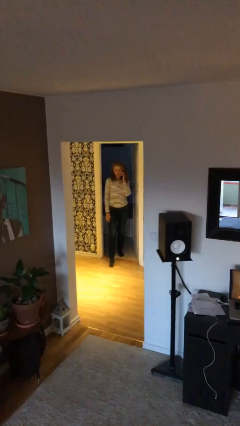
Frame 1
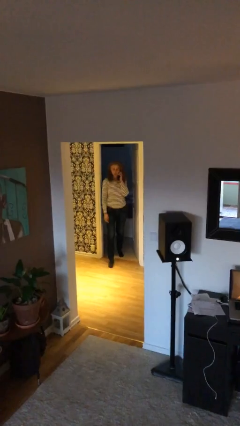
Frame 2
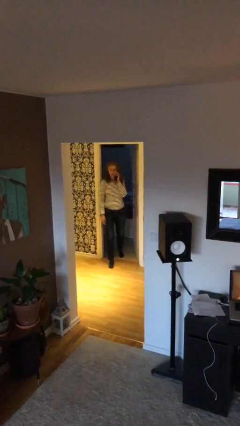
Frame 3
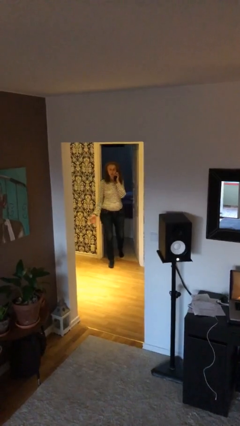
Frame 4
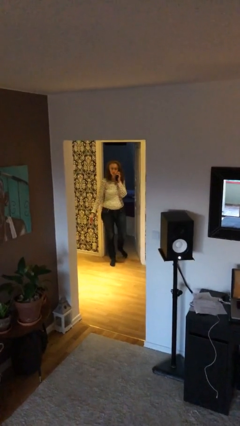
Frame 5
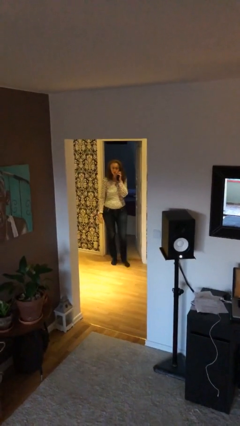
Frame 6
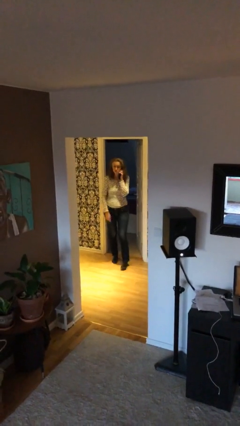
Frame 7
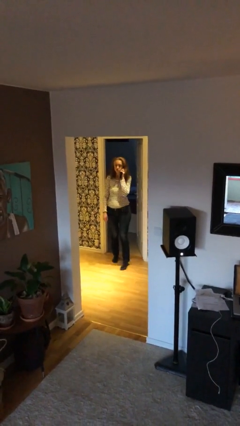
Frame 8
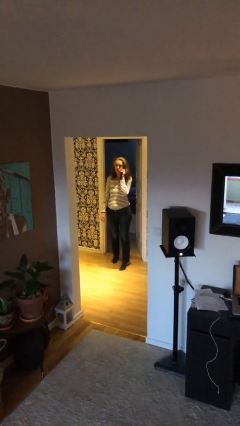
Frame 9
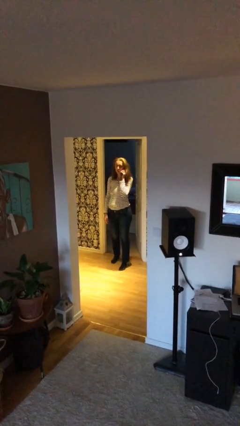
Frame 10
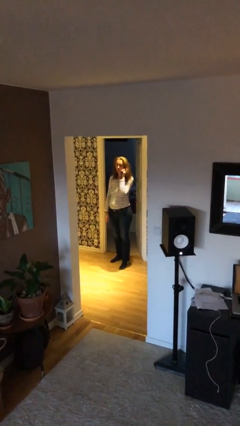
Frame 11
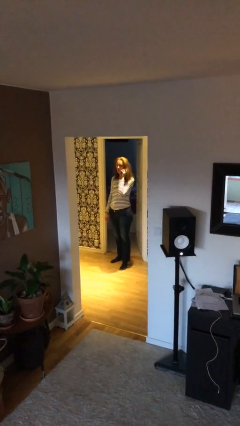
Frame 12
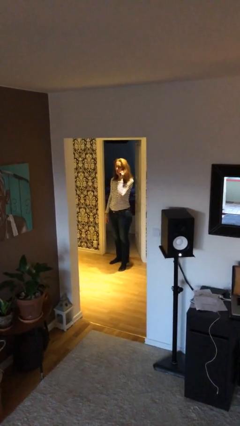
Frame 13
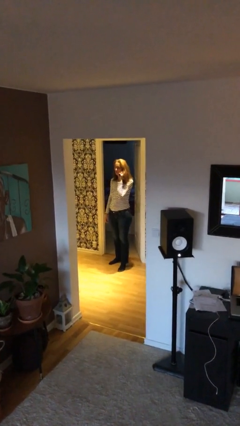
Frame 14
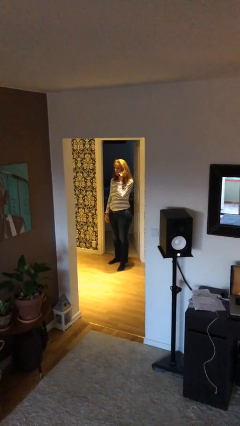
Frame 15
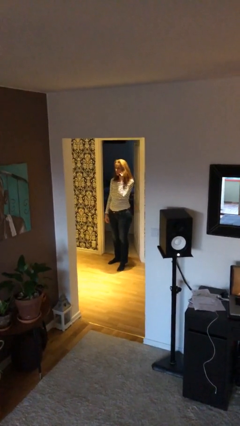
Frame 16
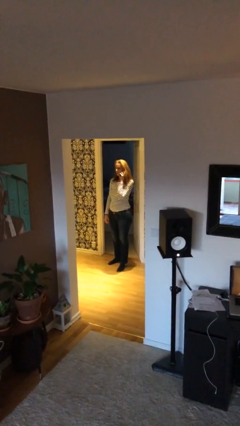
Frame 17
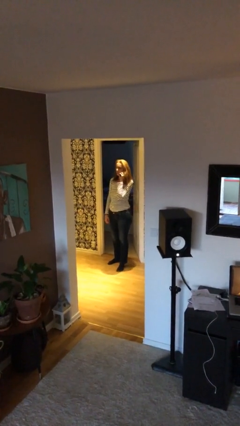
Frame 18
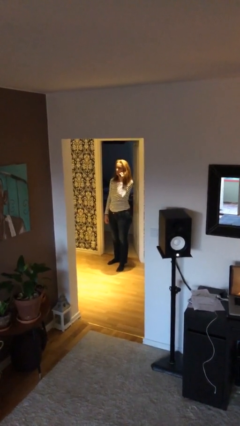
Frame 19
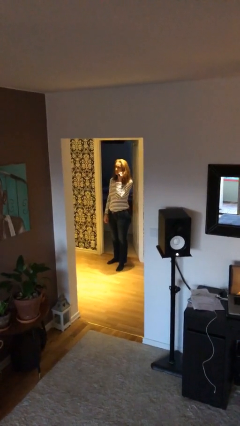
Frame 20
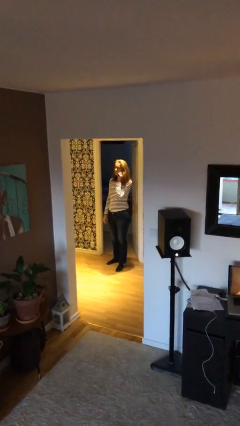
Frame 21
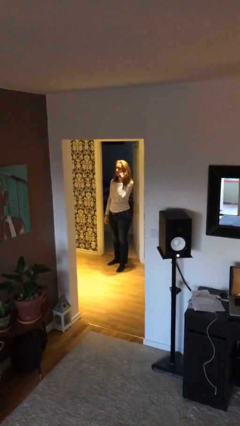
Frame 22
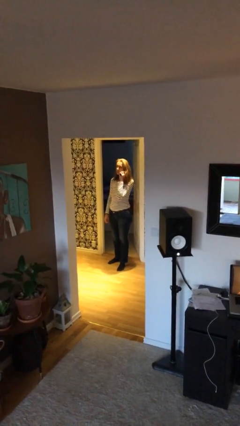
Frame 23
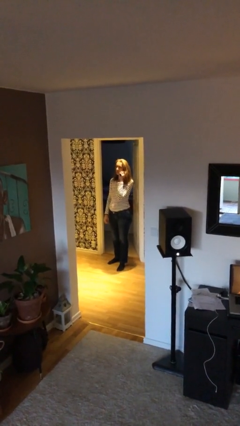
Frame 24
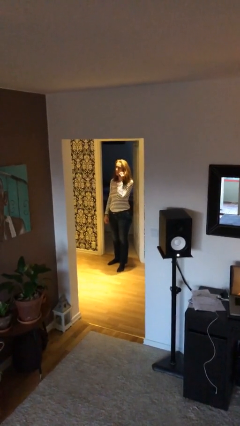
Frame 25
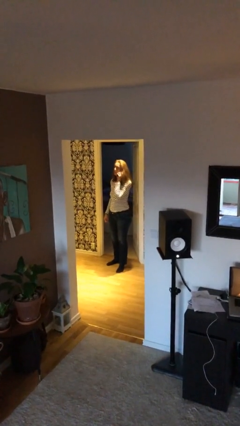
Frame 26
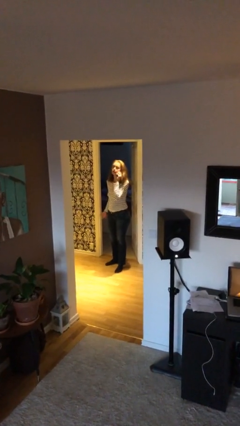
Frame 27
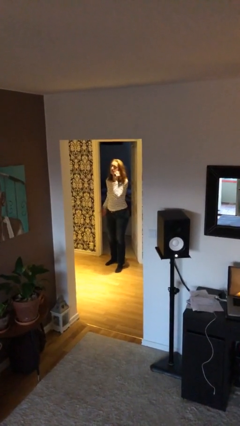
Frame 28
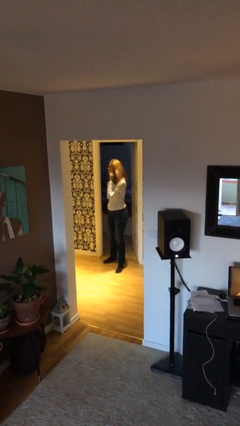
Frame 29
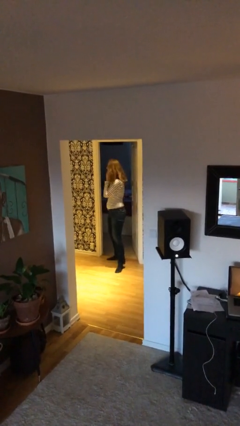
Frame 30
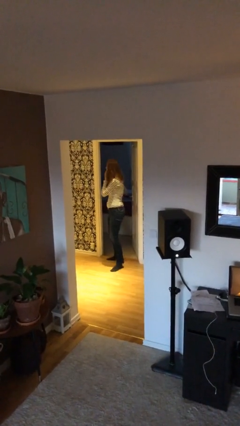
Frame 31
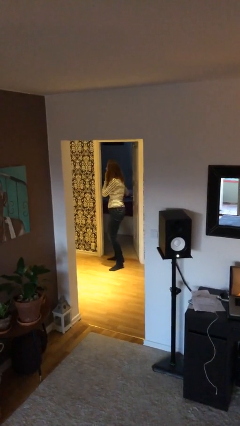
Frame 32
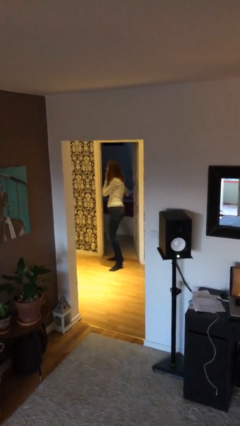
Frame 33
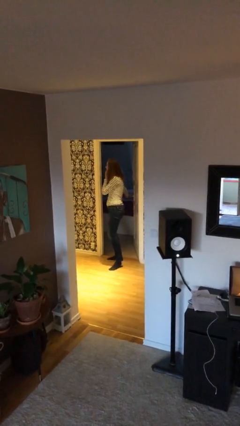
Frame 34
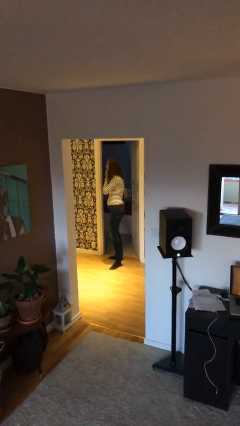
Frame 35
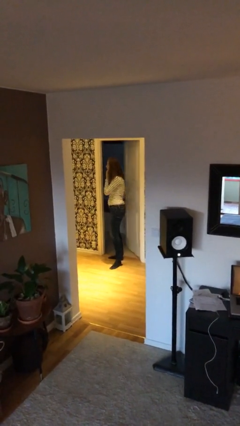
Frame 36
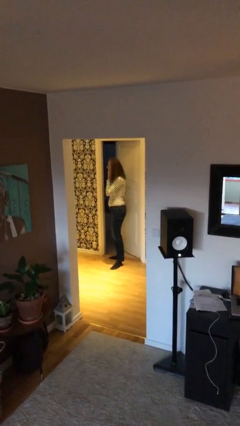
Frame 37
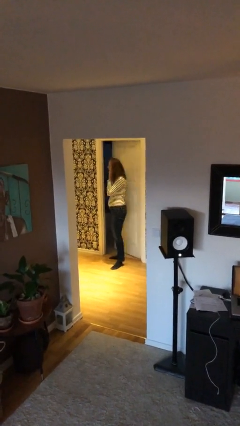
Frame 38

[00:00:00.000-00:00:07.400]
person enters scene through structure

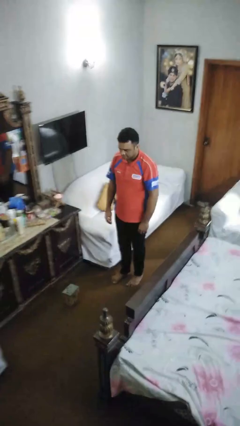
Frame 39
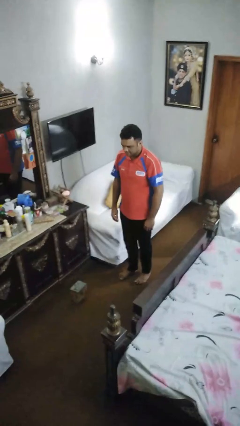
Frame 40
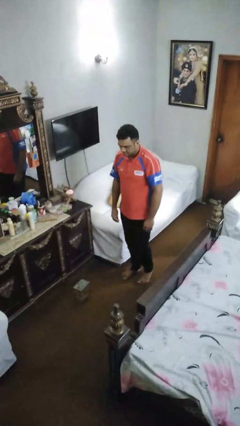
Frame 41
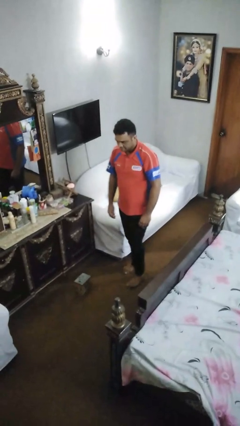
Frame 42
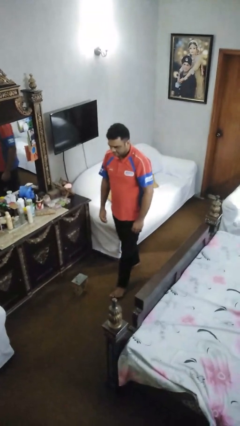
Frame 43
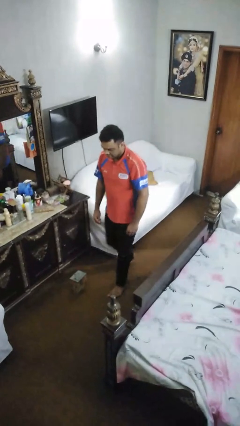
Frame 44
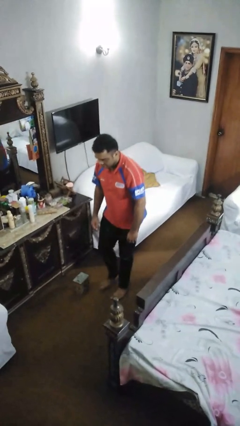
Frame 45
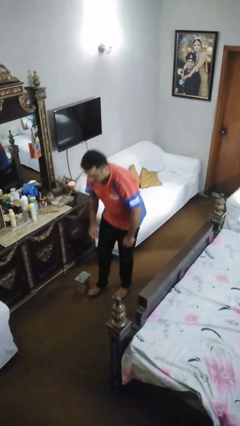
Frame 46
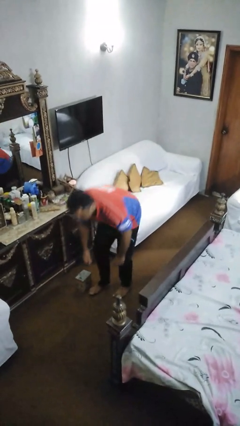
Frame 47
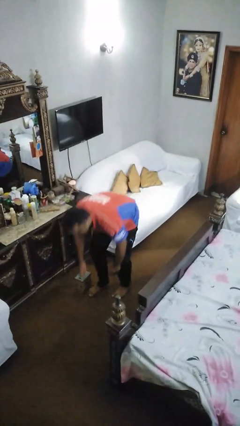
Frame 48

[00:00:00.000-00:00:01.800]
person trips on object on floor

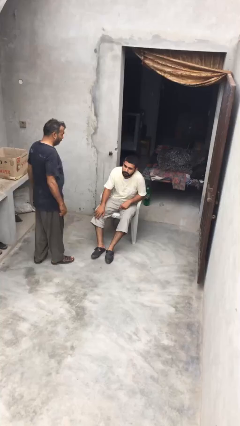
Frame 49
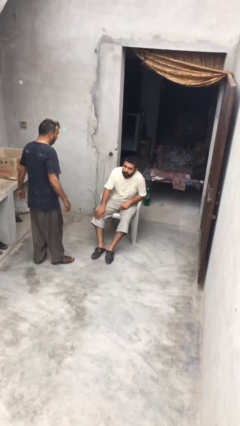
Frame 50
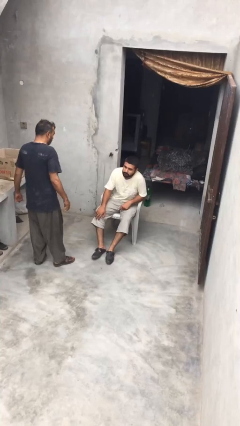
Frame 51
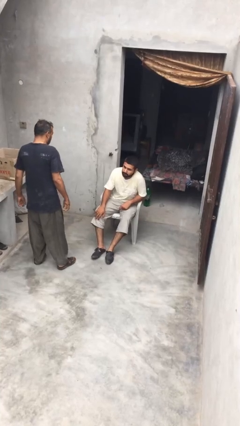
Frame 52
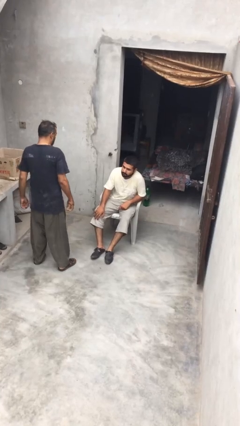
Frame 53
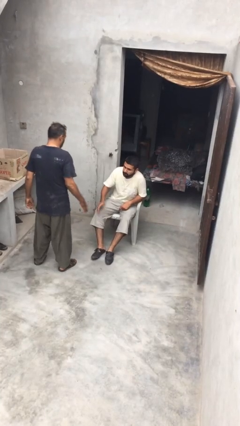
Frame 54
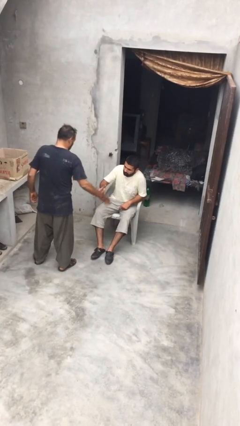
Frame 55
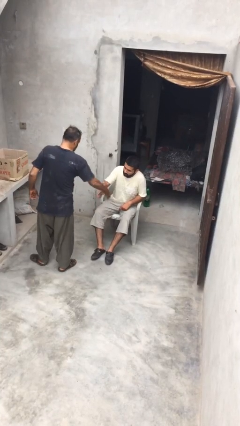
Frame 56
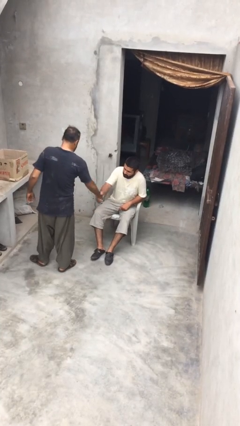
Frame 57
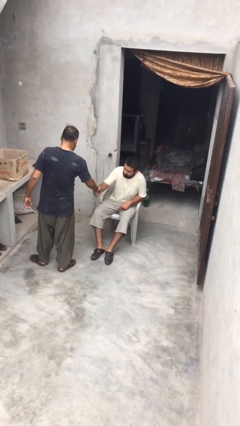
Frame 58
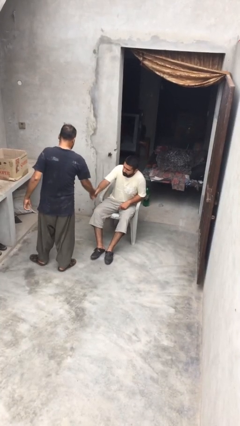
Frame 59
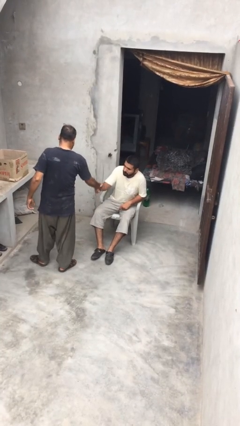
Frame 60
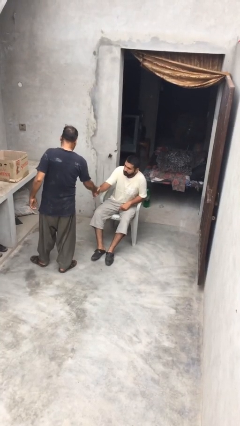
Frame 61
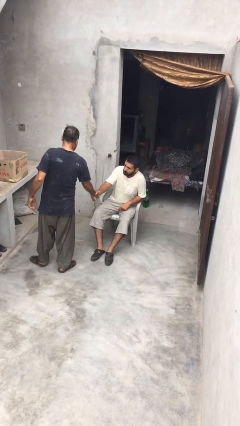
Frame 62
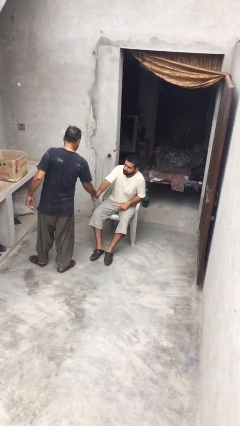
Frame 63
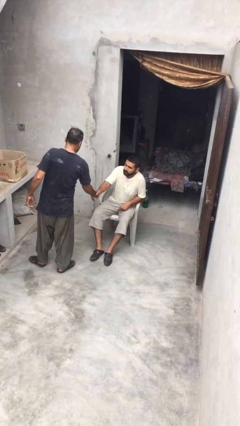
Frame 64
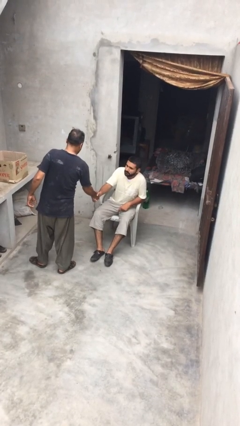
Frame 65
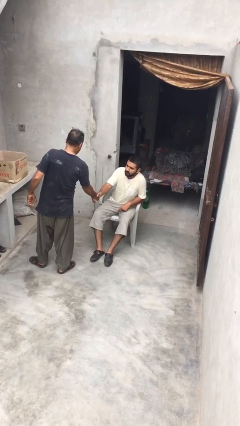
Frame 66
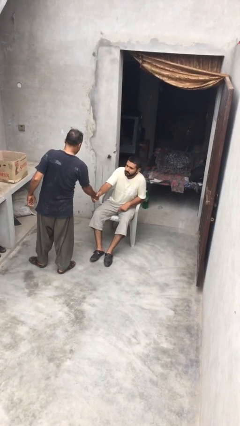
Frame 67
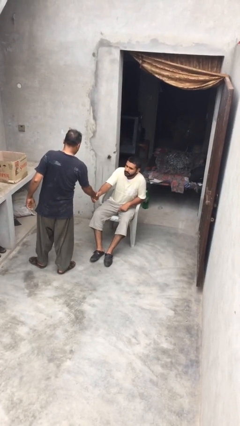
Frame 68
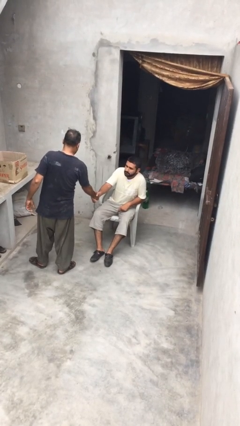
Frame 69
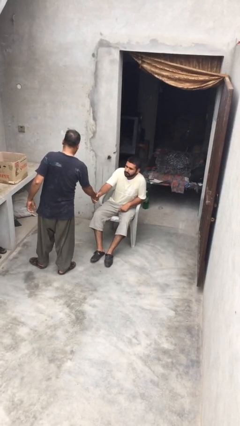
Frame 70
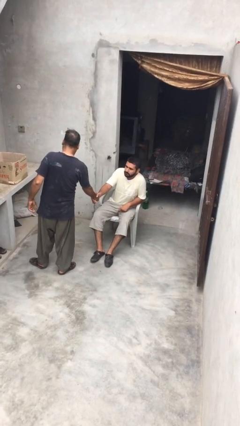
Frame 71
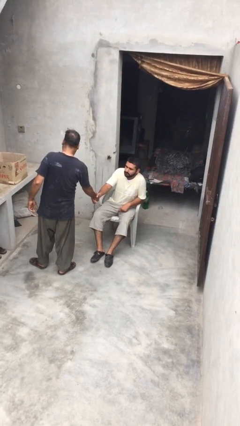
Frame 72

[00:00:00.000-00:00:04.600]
person shakes hand

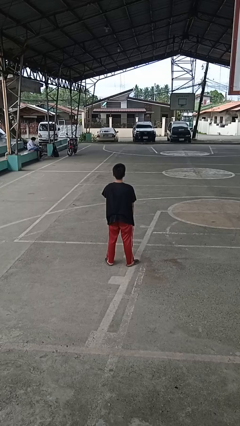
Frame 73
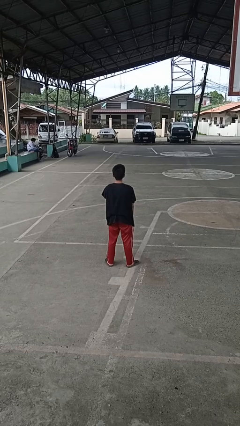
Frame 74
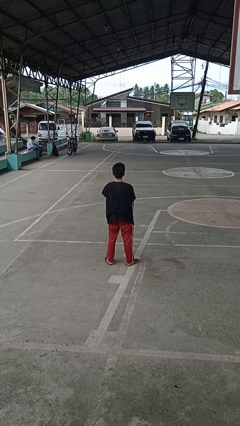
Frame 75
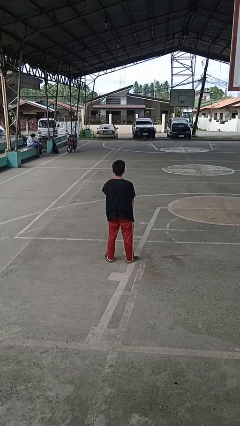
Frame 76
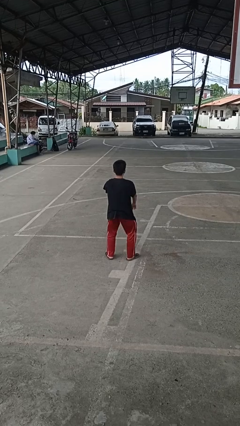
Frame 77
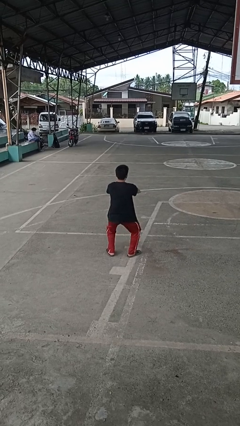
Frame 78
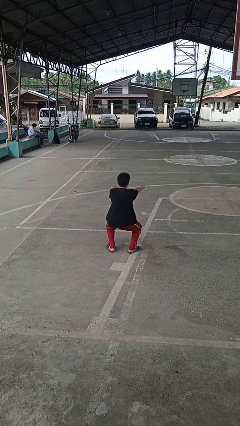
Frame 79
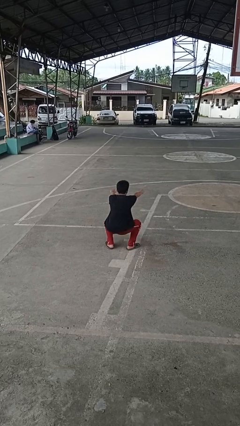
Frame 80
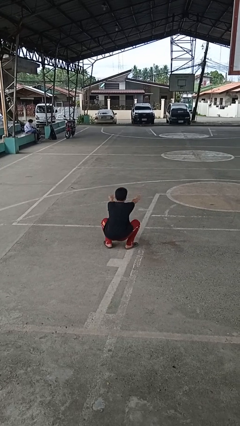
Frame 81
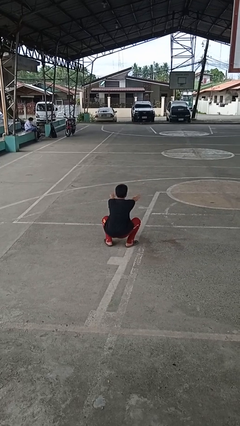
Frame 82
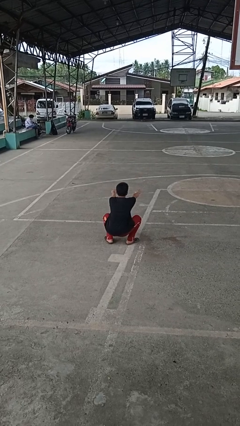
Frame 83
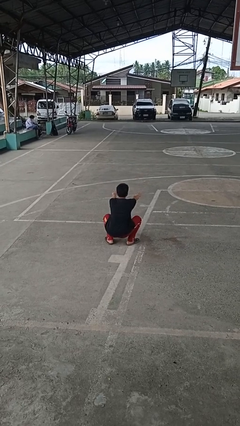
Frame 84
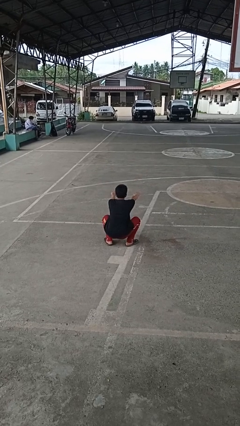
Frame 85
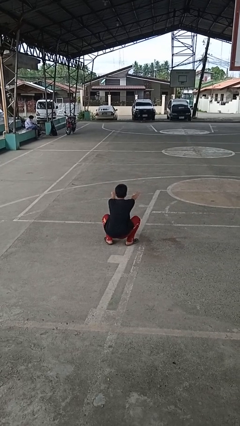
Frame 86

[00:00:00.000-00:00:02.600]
person squats

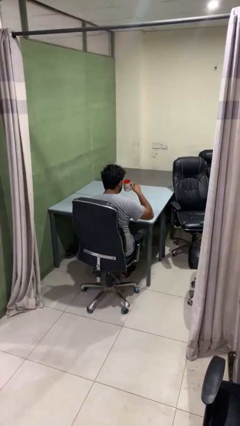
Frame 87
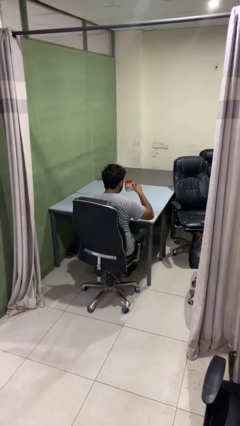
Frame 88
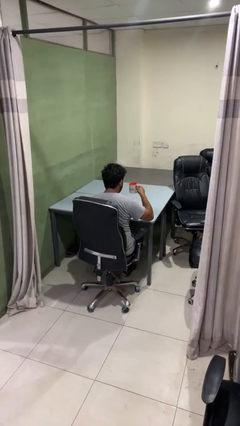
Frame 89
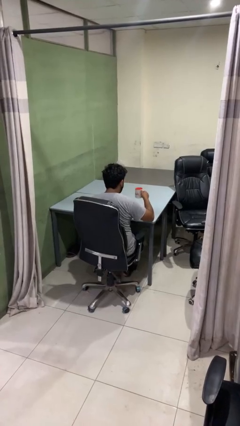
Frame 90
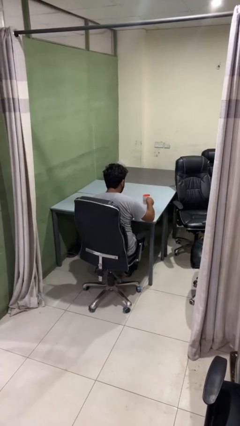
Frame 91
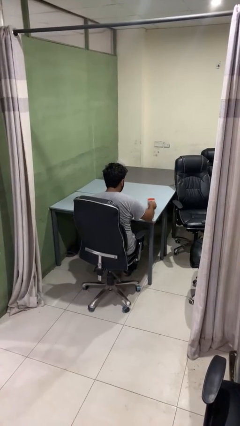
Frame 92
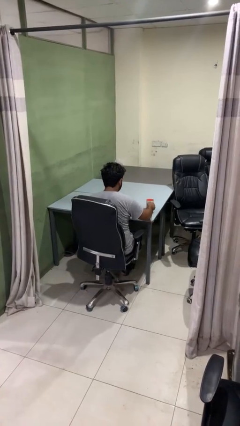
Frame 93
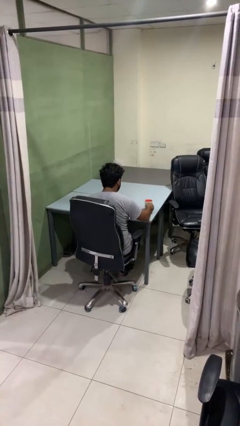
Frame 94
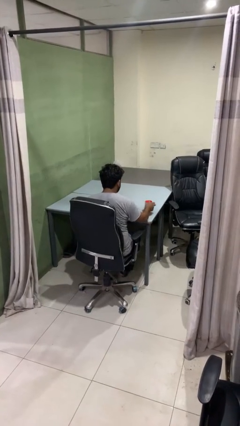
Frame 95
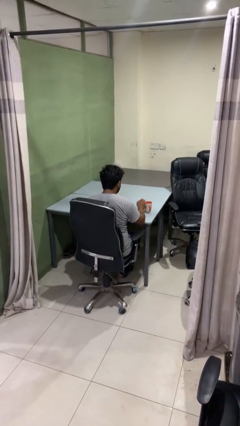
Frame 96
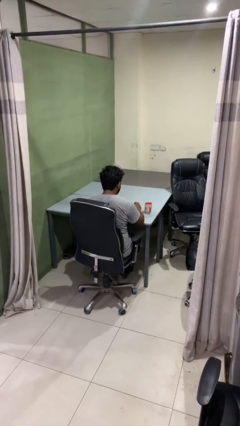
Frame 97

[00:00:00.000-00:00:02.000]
person puts down object on table
